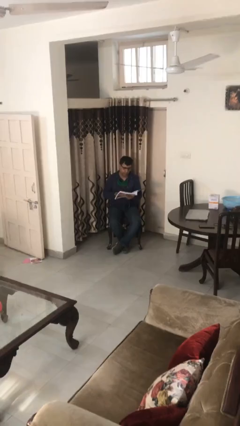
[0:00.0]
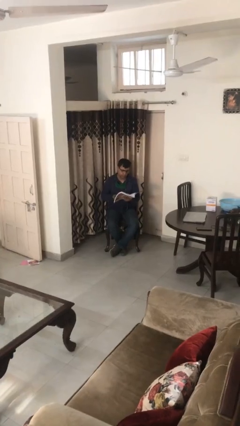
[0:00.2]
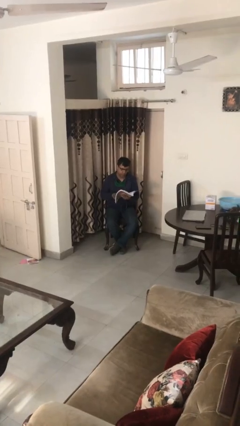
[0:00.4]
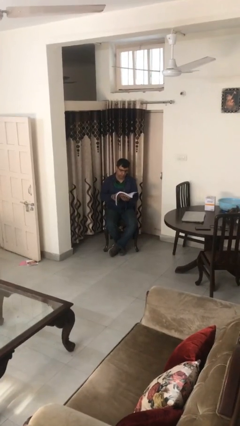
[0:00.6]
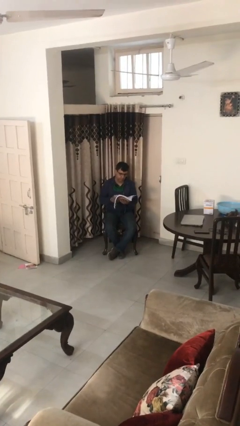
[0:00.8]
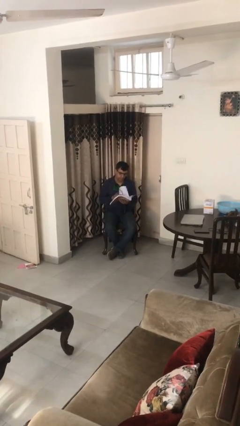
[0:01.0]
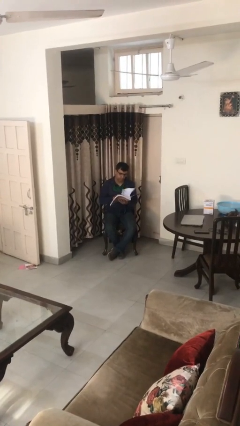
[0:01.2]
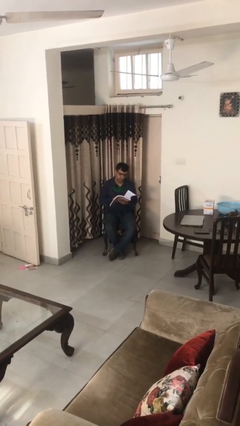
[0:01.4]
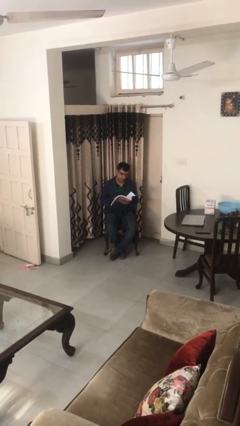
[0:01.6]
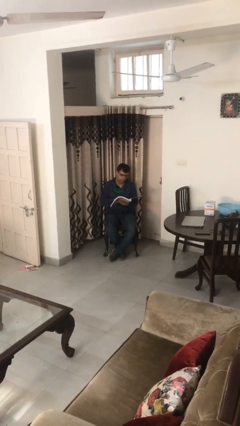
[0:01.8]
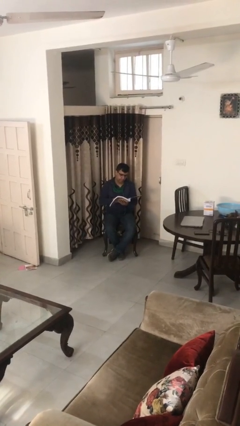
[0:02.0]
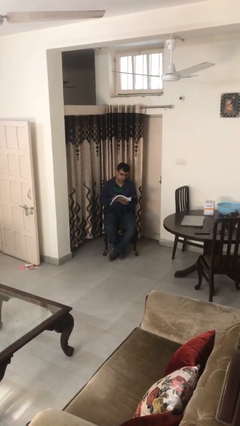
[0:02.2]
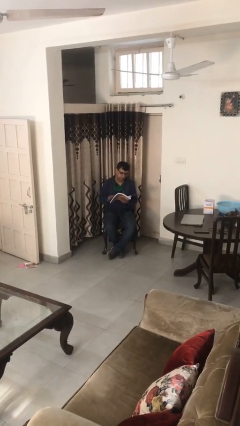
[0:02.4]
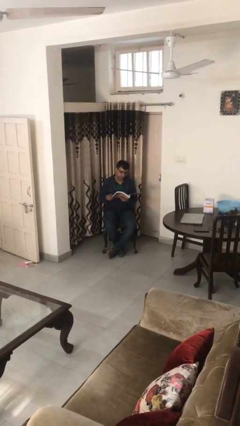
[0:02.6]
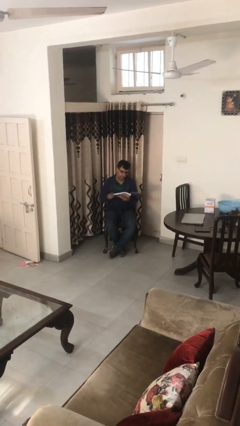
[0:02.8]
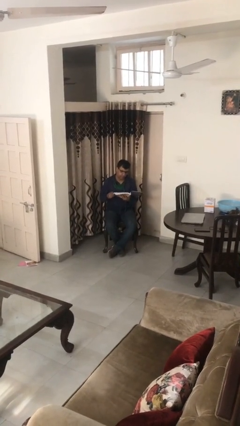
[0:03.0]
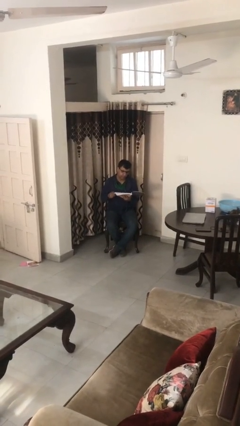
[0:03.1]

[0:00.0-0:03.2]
person reads document

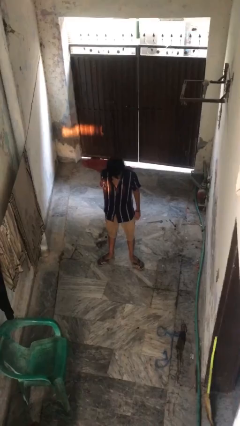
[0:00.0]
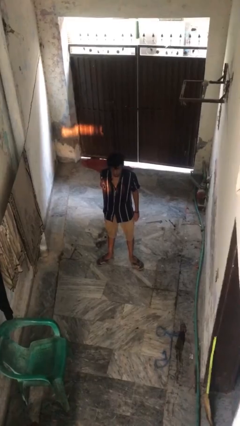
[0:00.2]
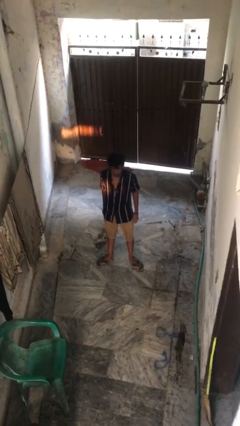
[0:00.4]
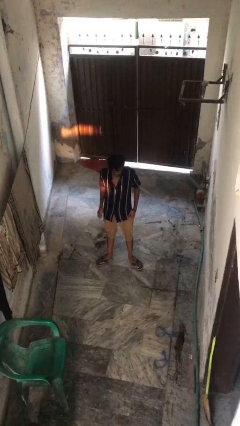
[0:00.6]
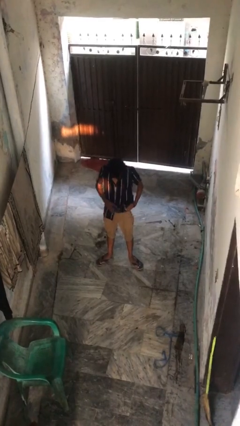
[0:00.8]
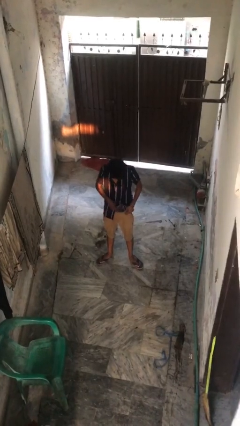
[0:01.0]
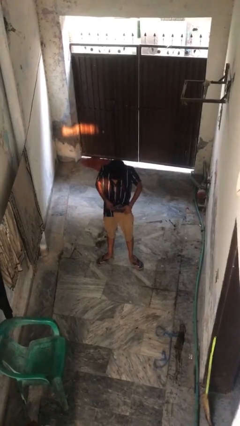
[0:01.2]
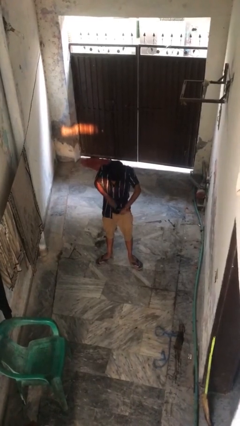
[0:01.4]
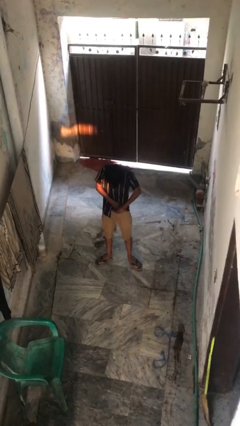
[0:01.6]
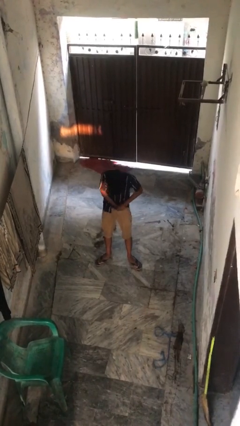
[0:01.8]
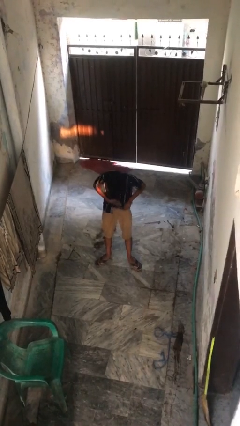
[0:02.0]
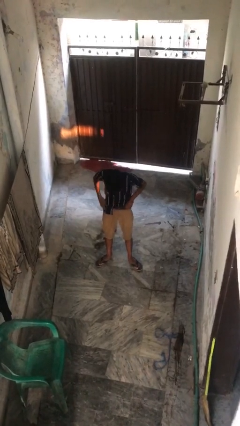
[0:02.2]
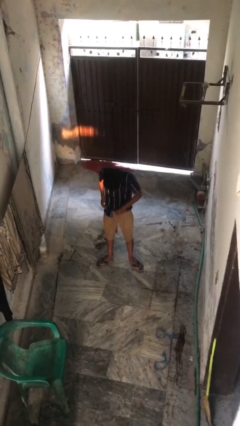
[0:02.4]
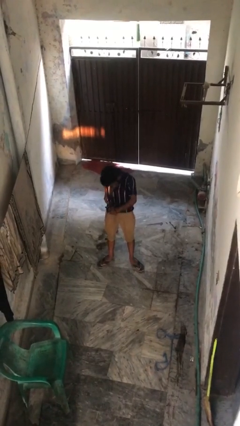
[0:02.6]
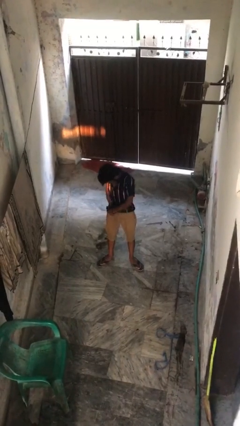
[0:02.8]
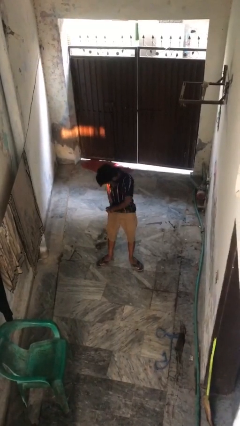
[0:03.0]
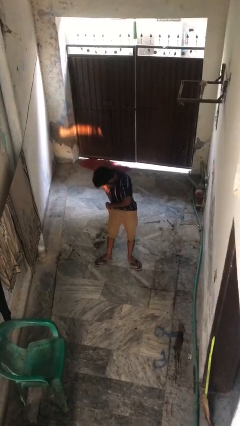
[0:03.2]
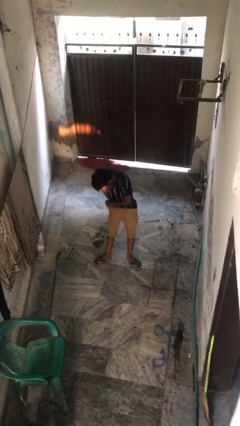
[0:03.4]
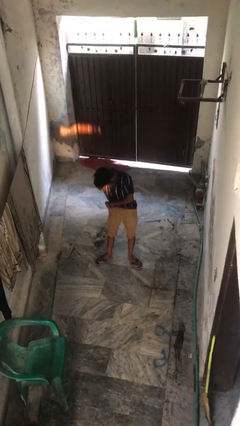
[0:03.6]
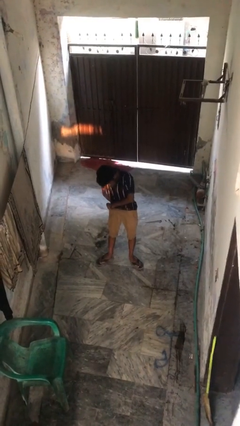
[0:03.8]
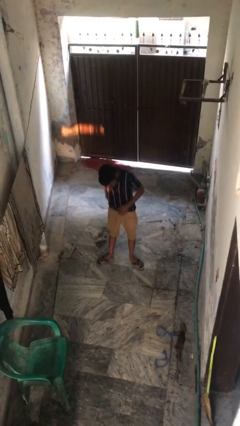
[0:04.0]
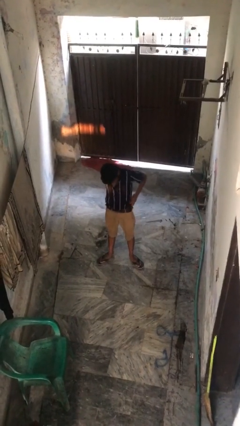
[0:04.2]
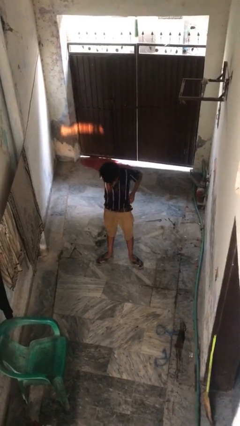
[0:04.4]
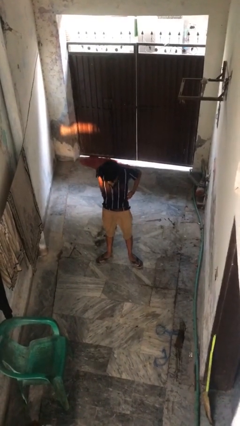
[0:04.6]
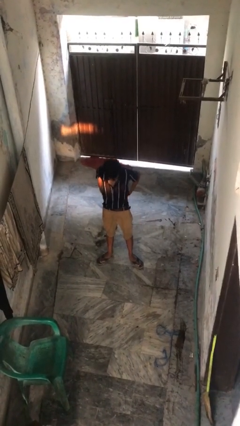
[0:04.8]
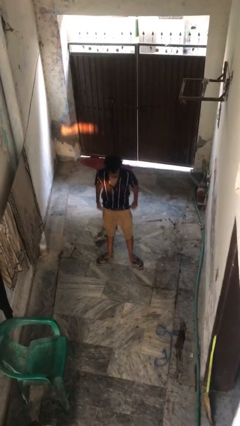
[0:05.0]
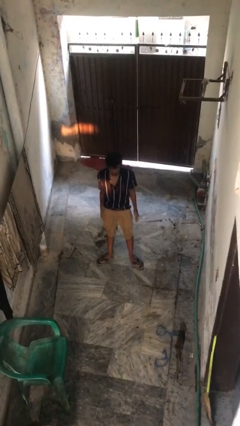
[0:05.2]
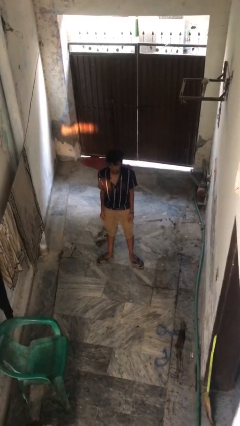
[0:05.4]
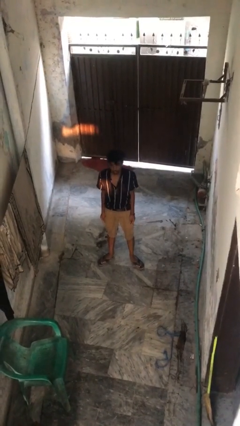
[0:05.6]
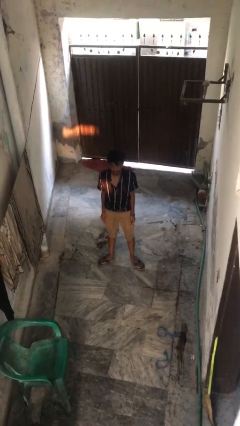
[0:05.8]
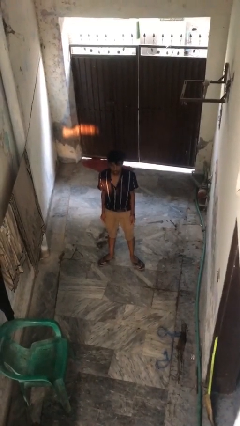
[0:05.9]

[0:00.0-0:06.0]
person tucks in shirt

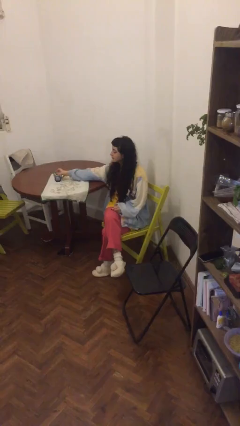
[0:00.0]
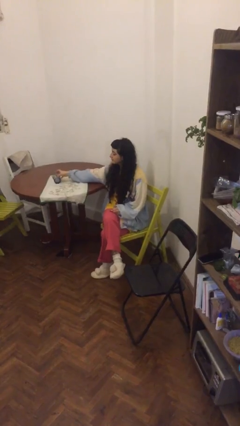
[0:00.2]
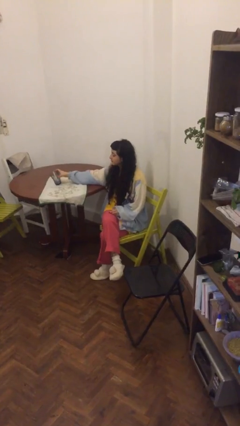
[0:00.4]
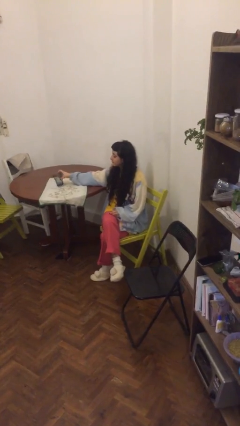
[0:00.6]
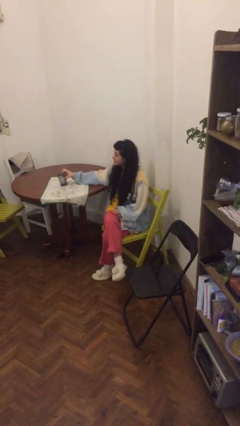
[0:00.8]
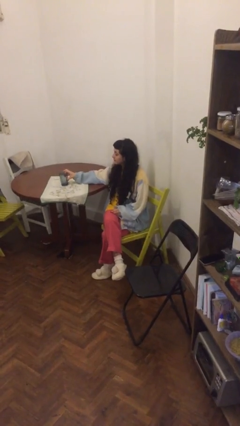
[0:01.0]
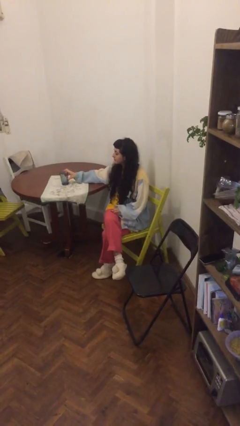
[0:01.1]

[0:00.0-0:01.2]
person sets upright glass

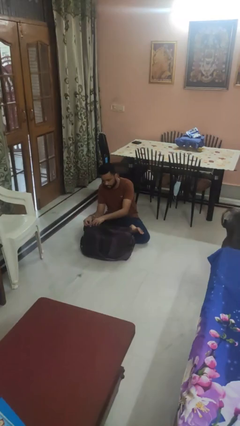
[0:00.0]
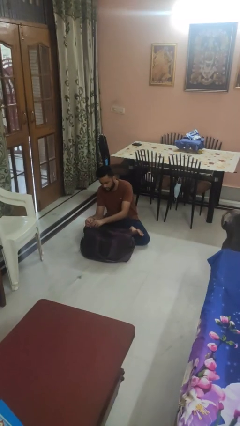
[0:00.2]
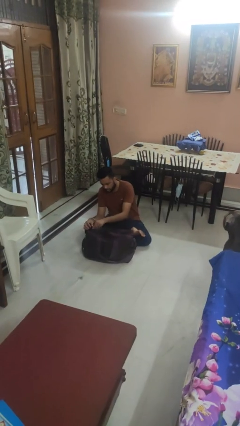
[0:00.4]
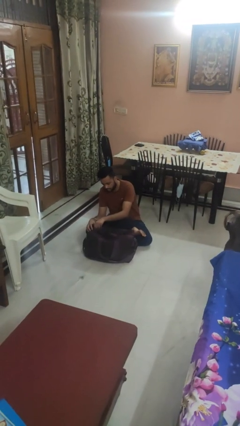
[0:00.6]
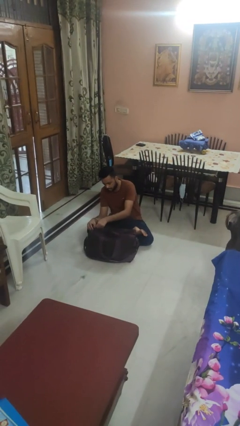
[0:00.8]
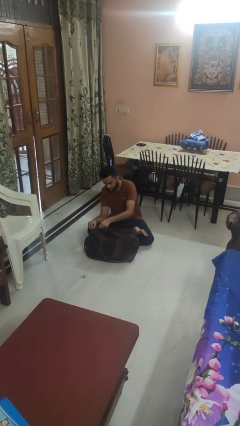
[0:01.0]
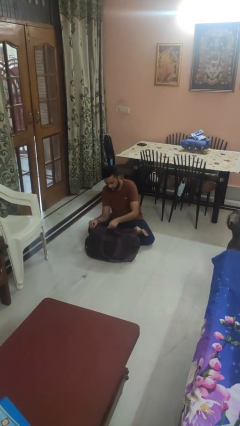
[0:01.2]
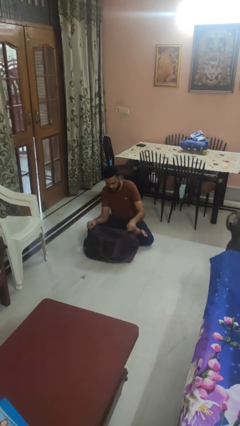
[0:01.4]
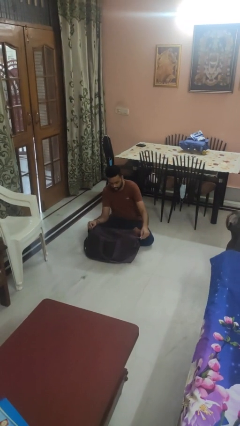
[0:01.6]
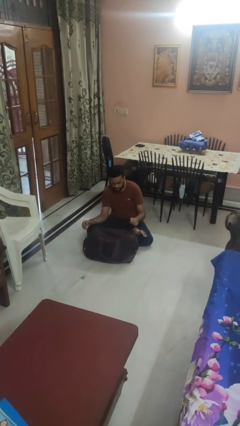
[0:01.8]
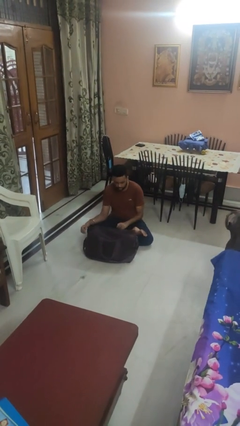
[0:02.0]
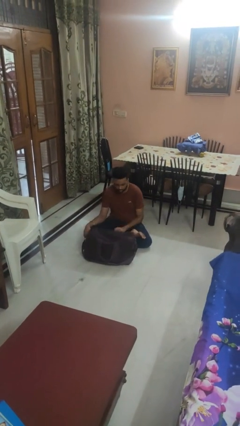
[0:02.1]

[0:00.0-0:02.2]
person closes suitcase

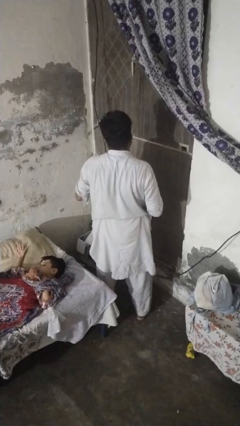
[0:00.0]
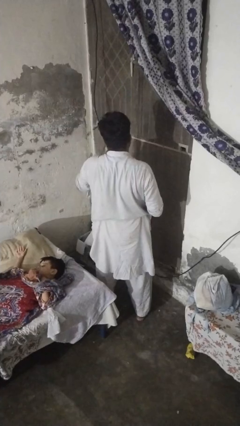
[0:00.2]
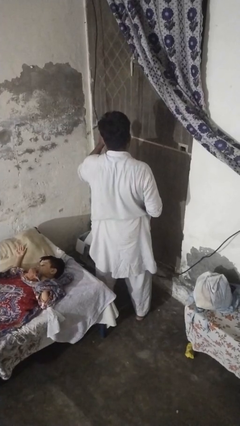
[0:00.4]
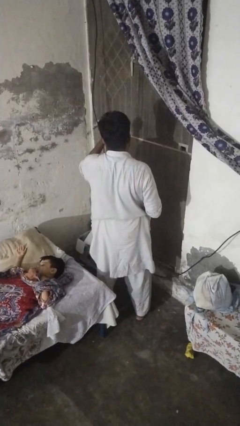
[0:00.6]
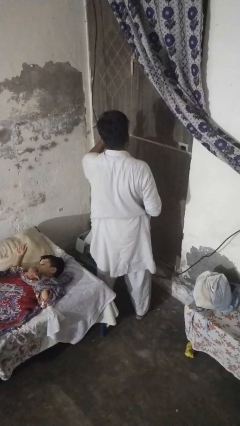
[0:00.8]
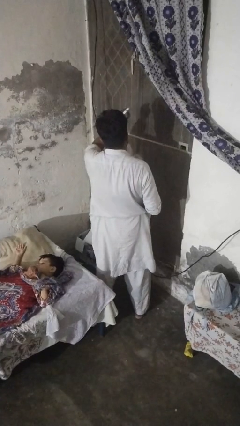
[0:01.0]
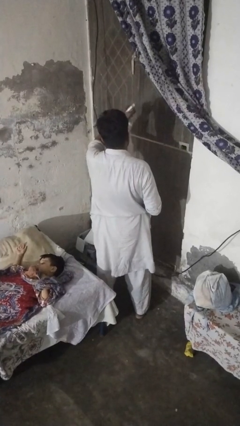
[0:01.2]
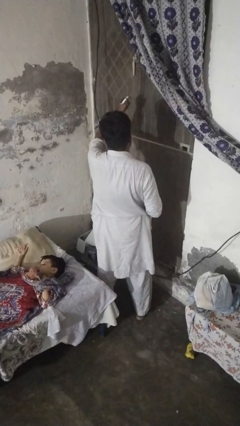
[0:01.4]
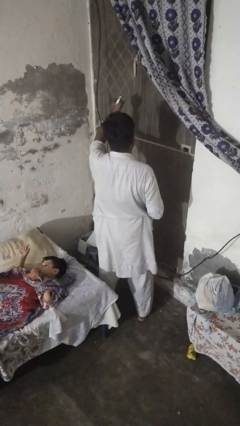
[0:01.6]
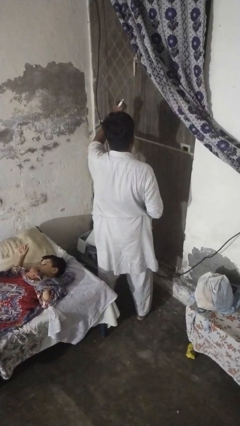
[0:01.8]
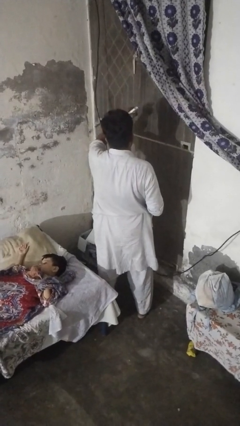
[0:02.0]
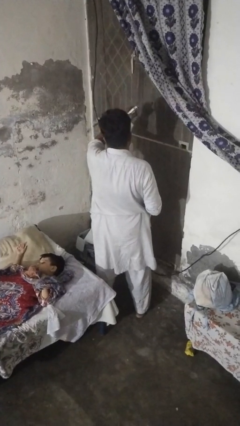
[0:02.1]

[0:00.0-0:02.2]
person sprays from bottle

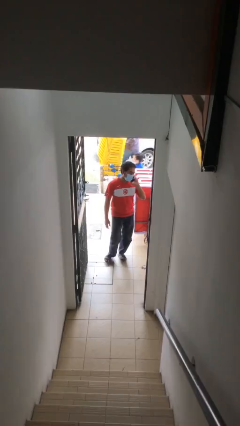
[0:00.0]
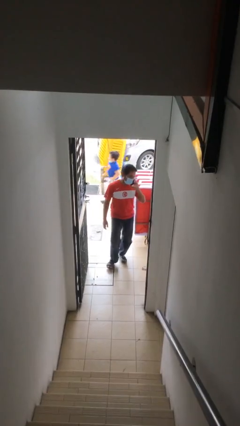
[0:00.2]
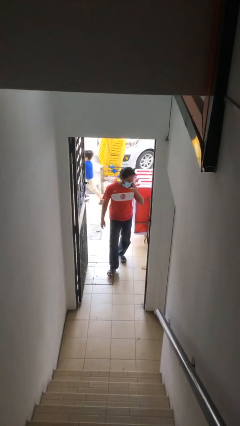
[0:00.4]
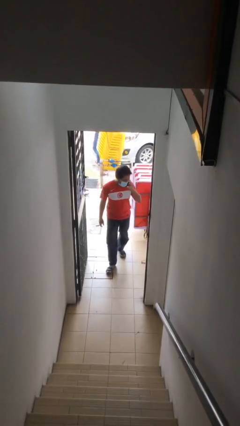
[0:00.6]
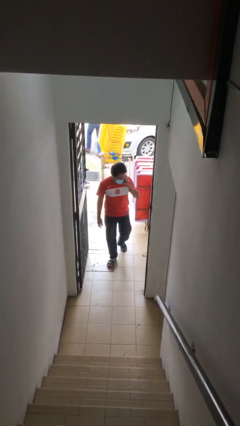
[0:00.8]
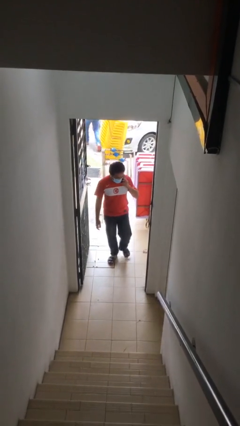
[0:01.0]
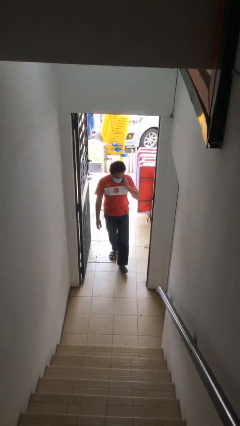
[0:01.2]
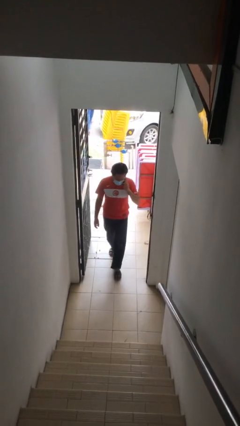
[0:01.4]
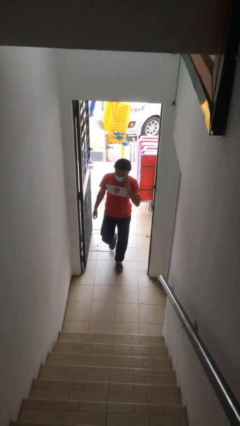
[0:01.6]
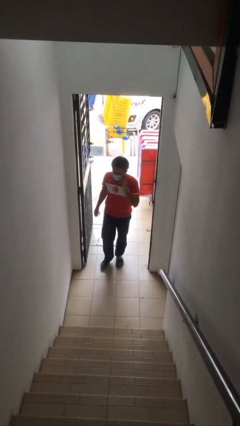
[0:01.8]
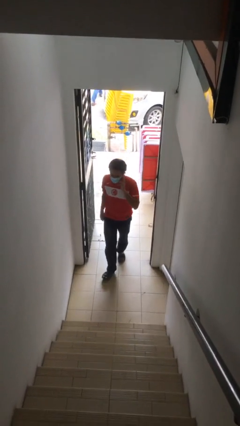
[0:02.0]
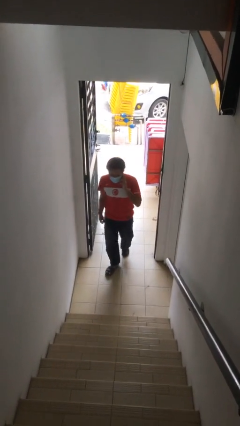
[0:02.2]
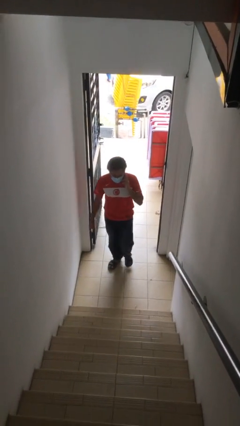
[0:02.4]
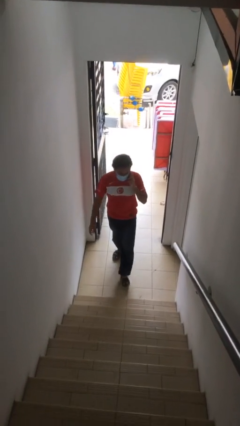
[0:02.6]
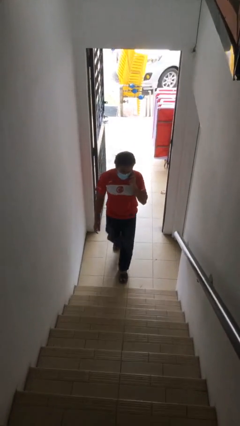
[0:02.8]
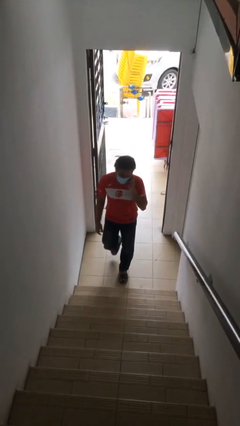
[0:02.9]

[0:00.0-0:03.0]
person enters scene through structure
